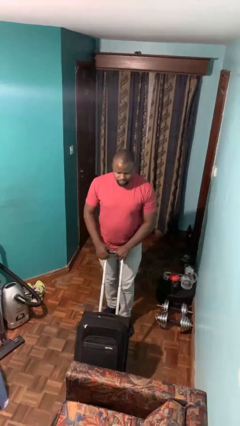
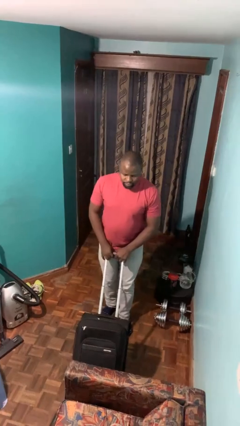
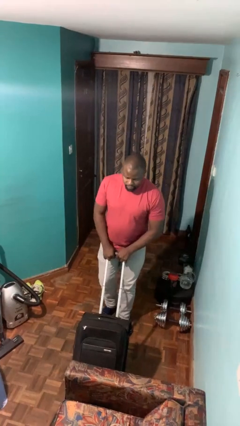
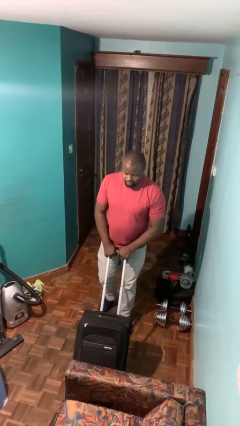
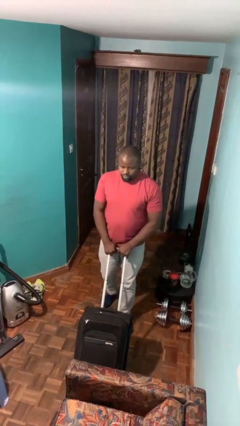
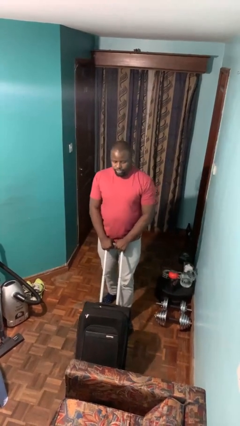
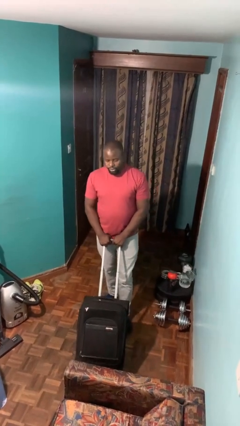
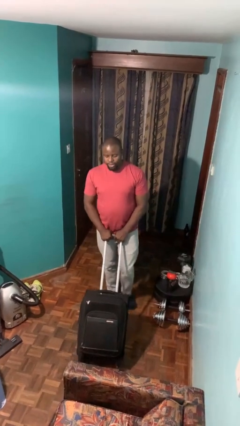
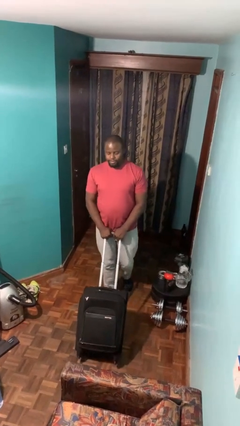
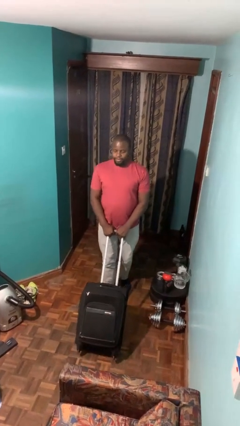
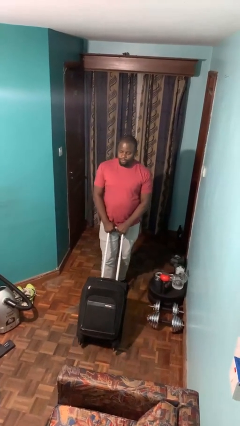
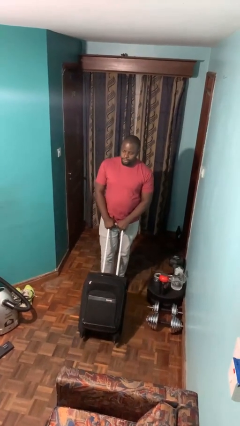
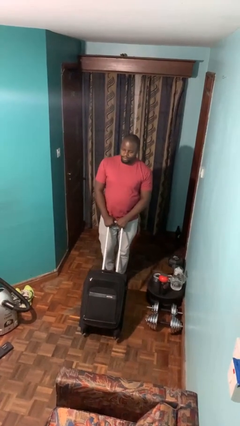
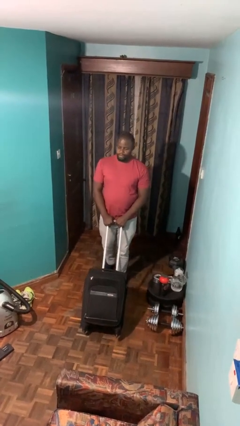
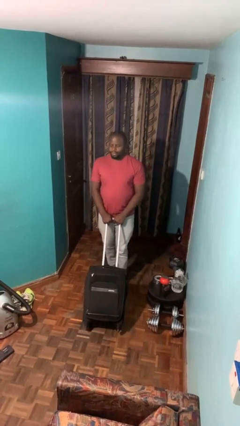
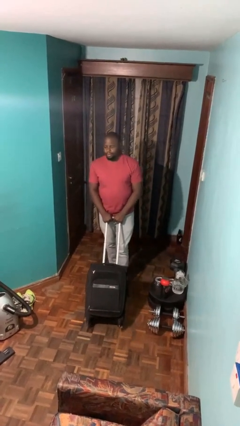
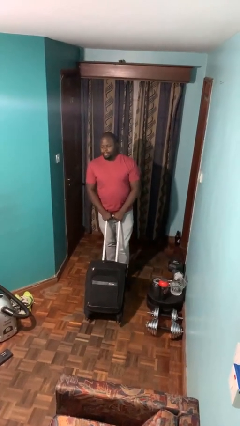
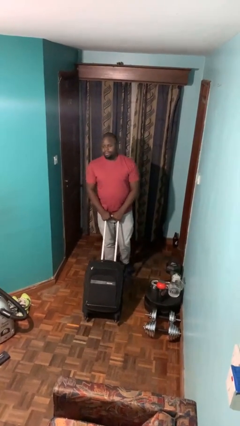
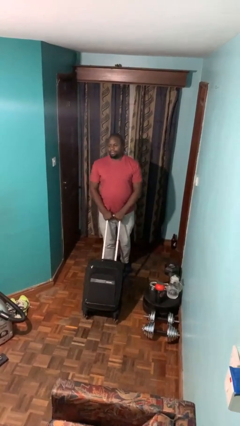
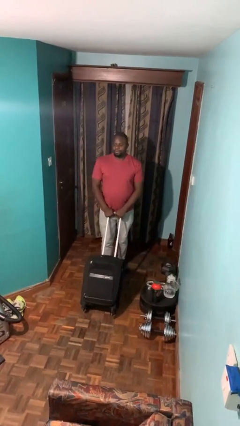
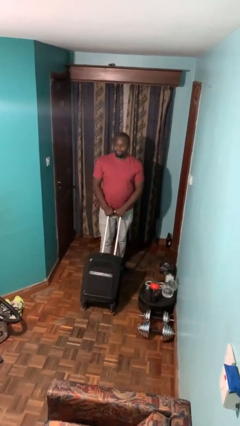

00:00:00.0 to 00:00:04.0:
person pulls wheeled cart

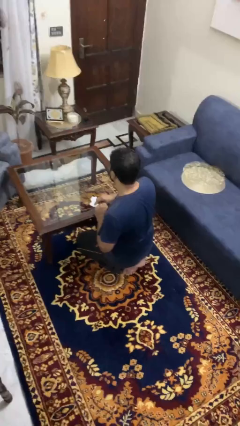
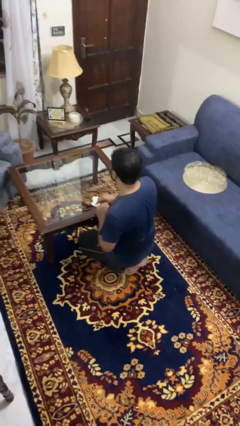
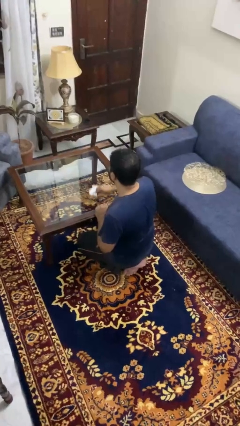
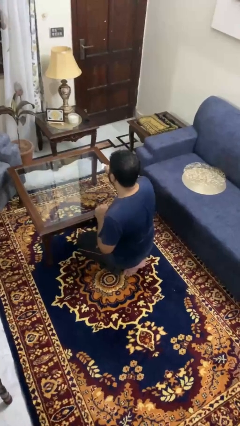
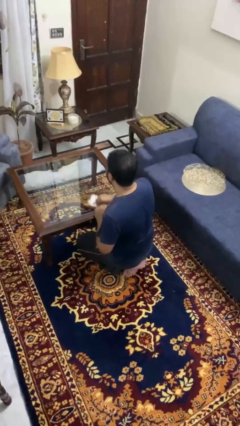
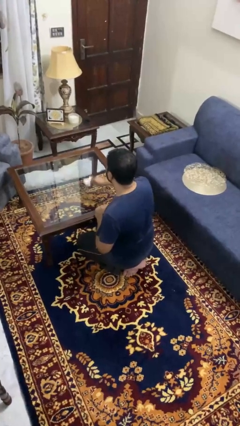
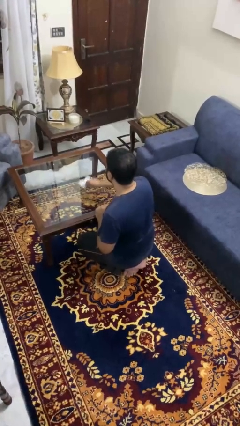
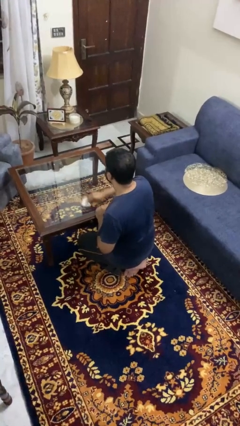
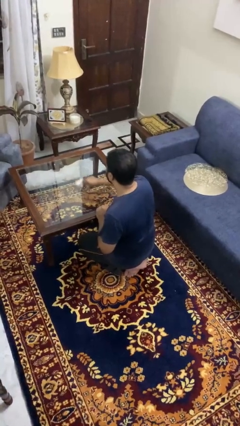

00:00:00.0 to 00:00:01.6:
person cleans table with rag

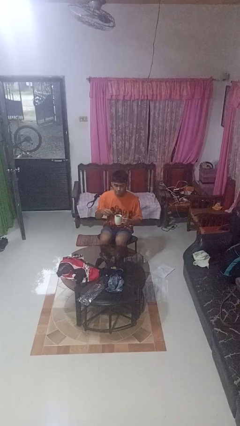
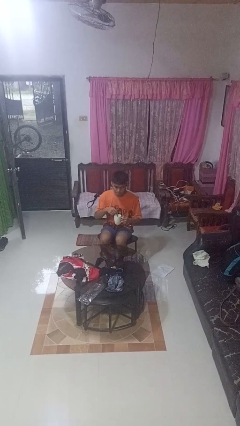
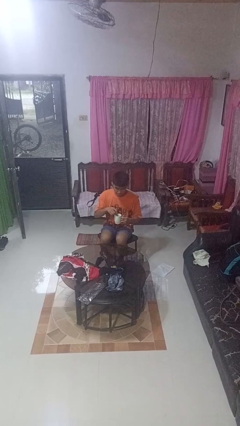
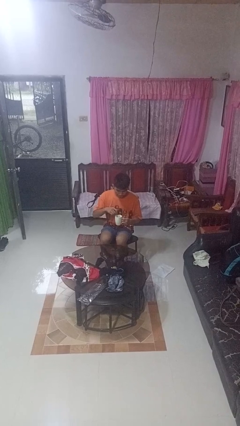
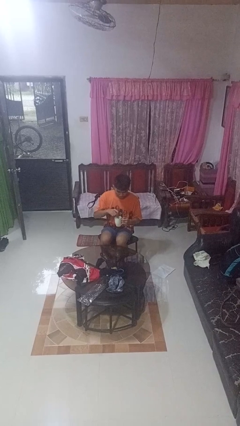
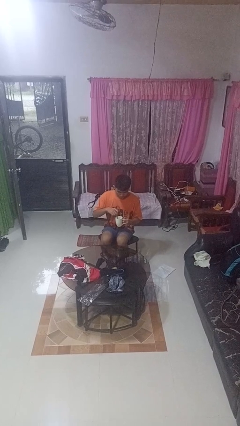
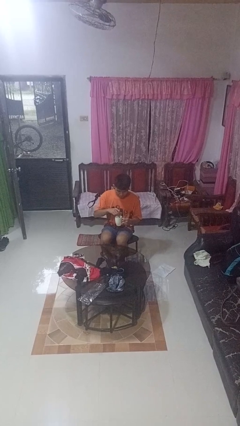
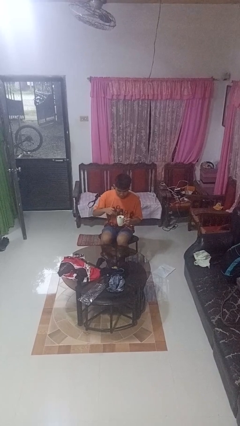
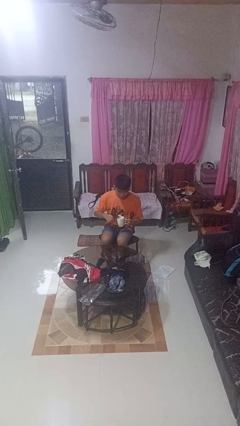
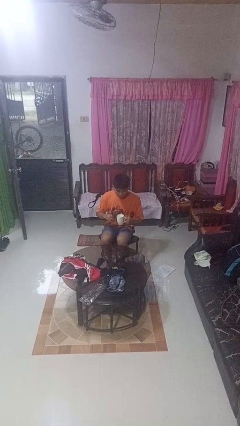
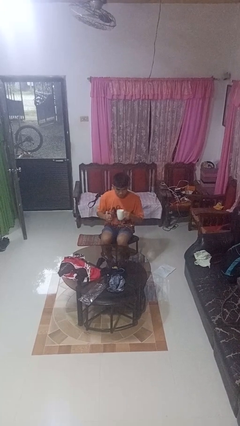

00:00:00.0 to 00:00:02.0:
person stirs mug

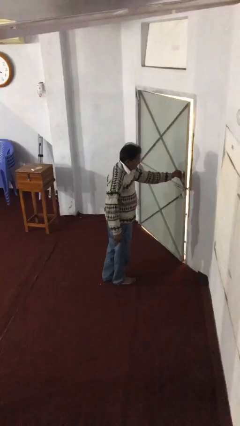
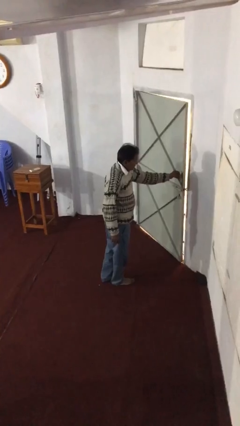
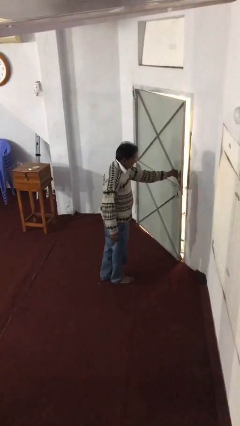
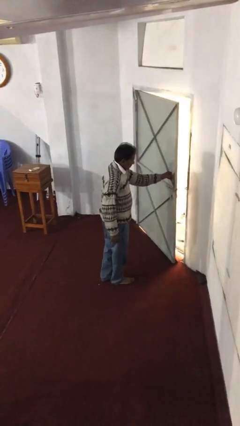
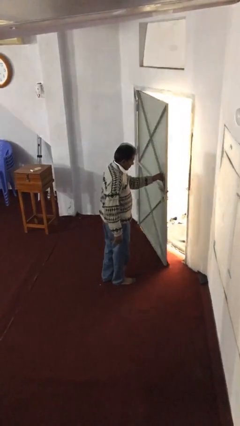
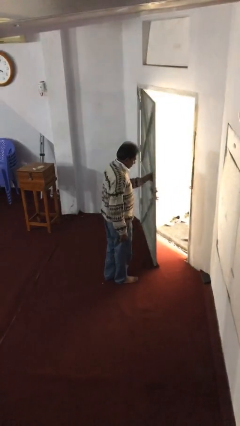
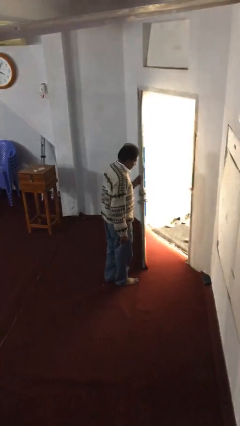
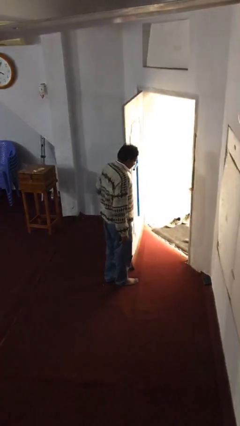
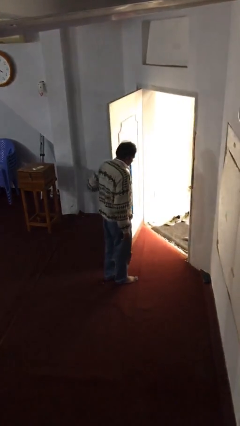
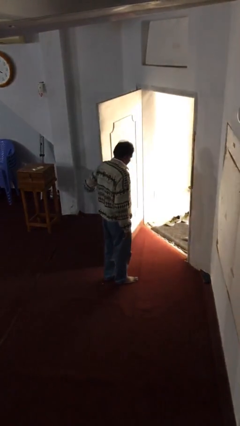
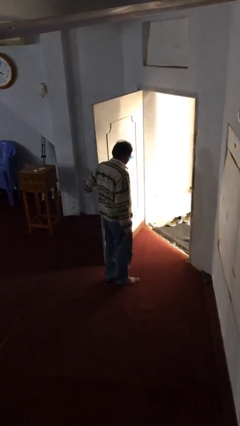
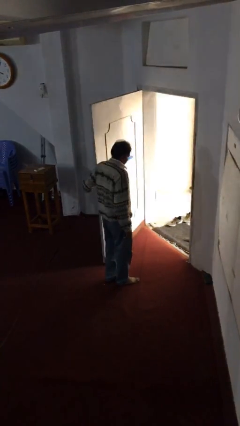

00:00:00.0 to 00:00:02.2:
person opens facility door

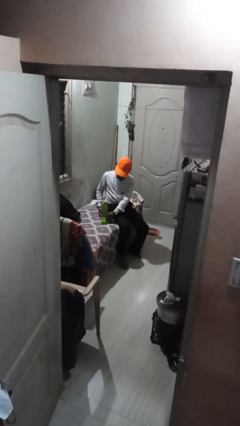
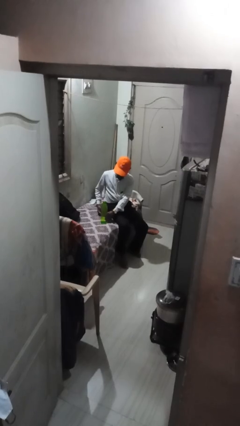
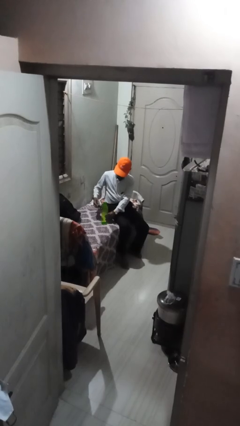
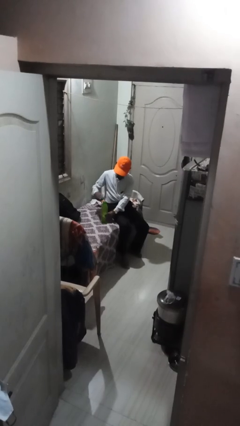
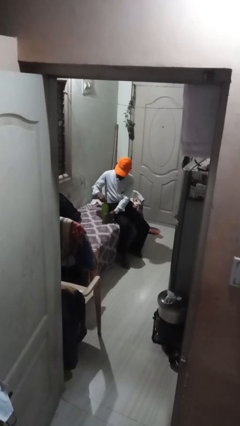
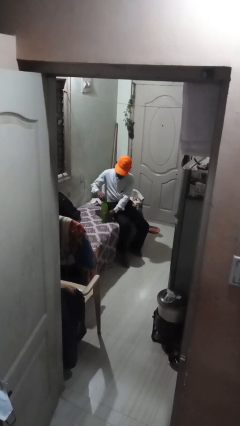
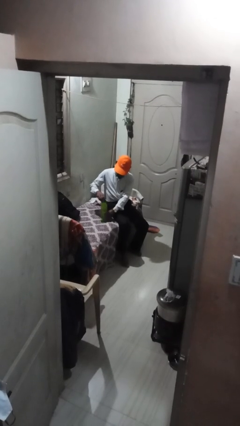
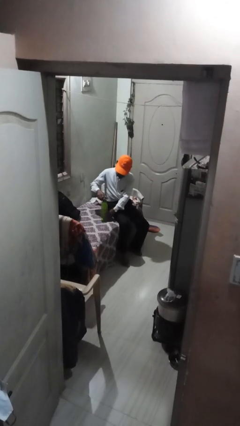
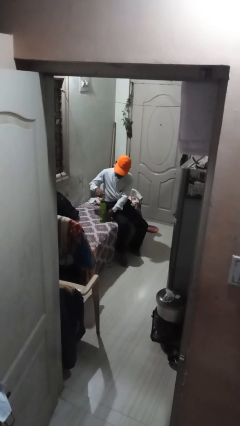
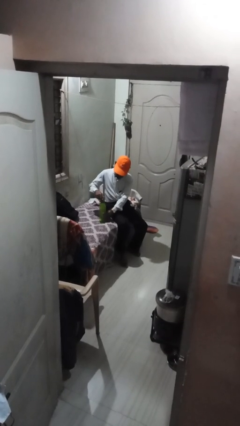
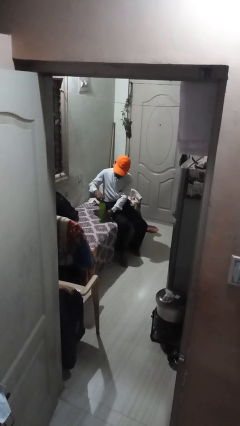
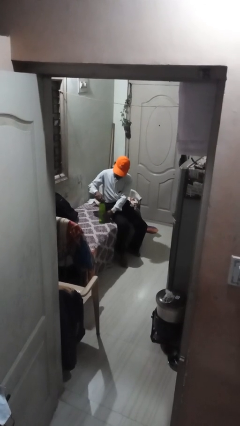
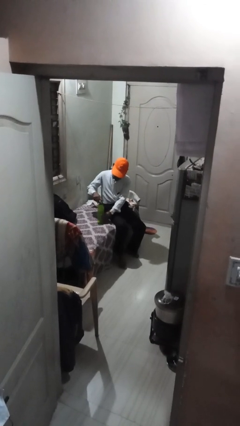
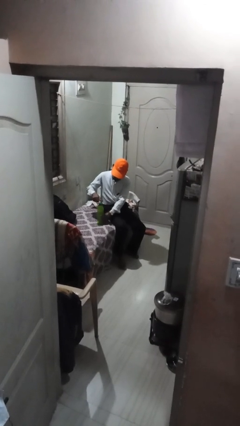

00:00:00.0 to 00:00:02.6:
person screws lid to bottle

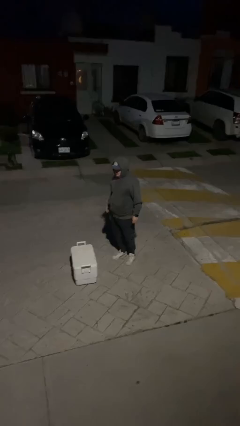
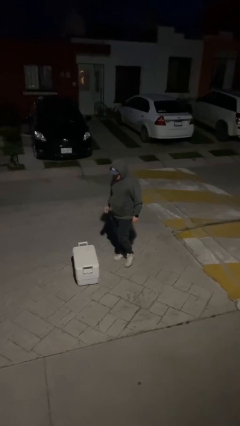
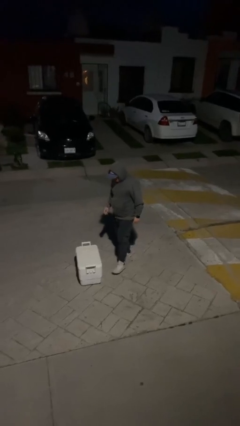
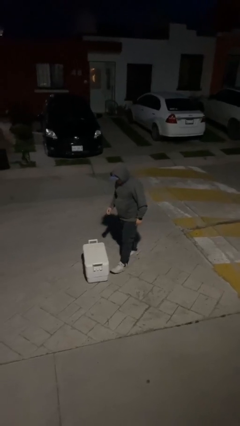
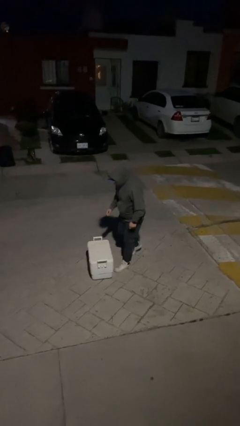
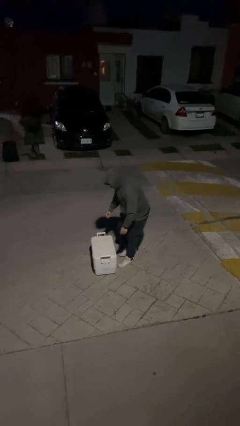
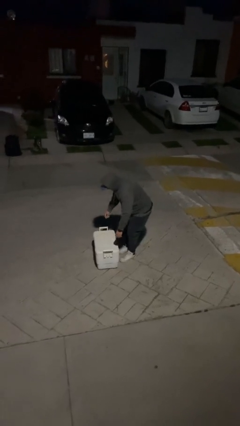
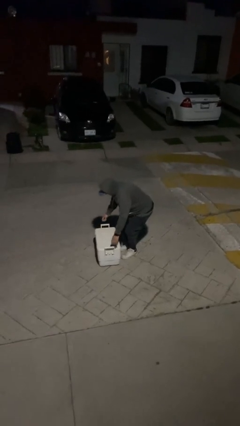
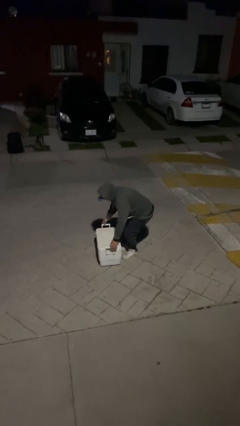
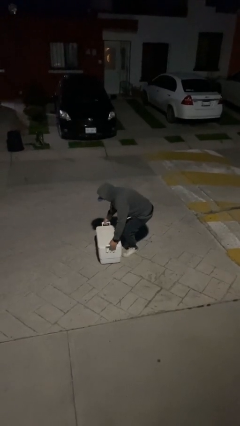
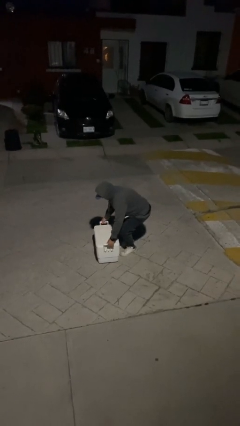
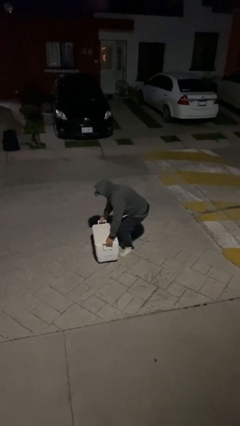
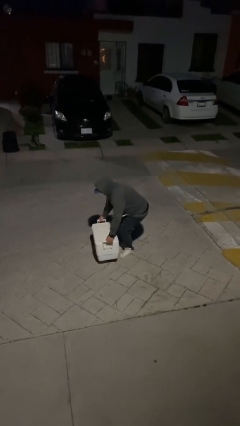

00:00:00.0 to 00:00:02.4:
person picks up object from floor

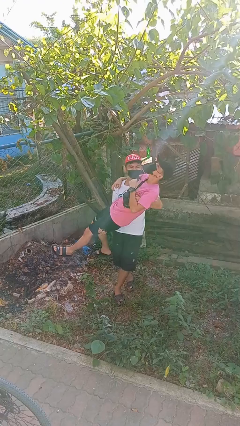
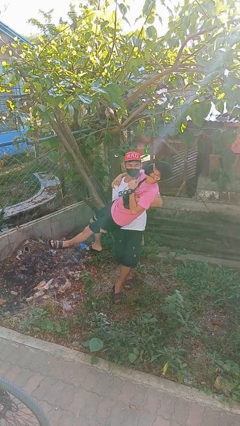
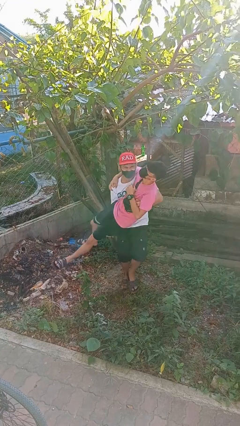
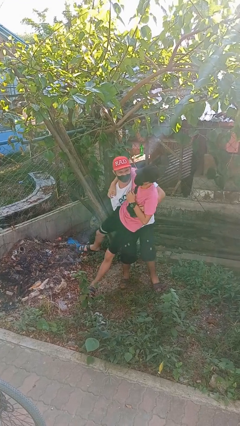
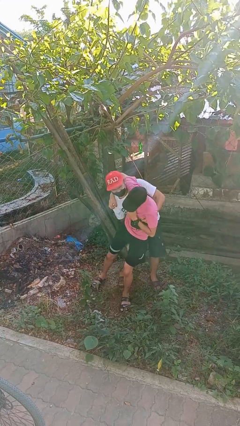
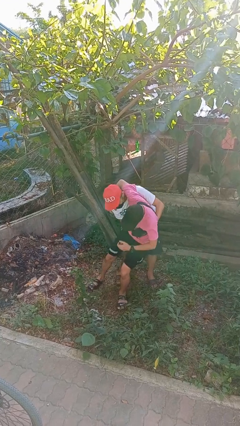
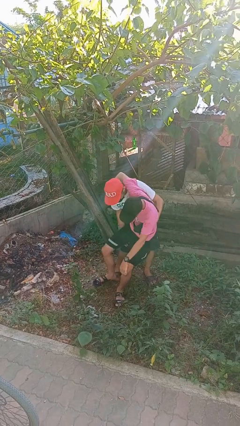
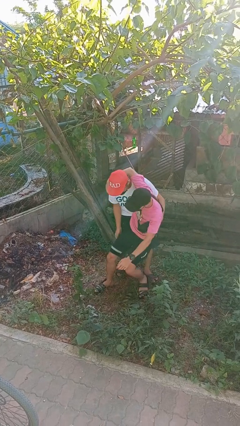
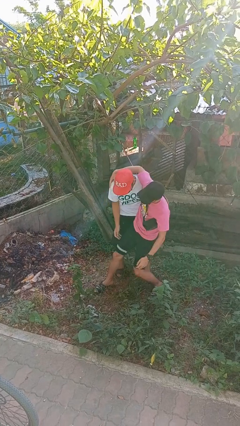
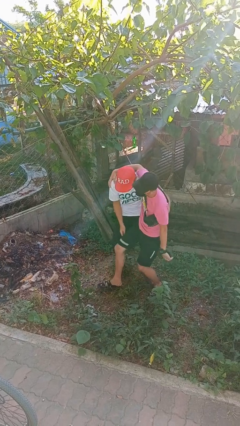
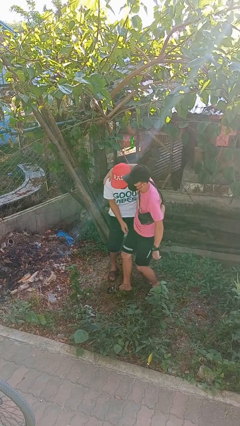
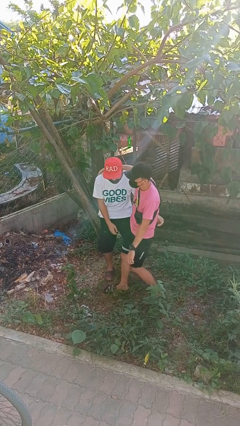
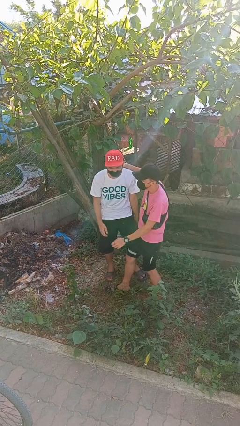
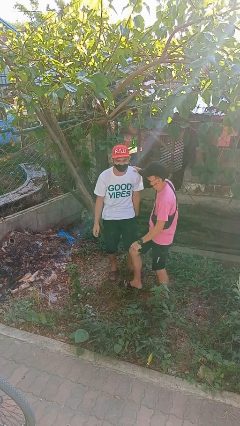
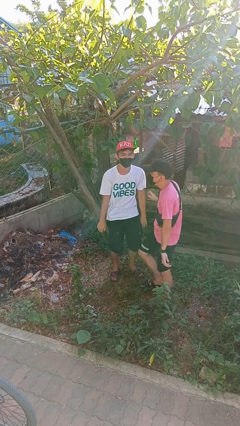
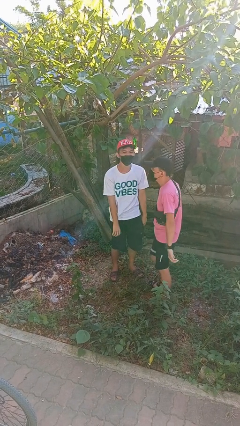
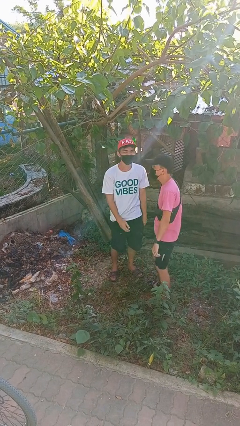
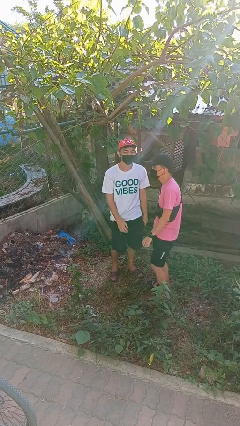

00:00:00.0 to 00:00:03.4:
person puts down person
